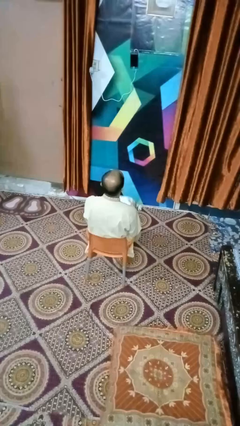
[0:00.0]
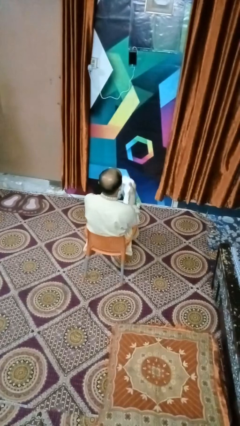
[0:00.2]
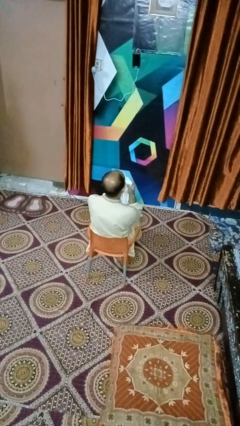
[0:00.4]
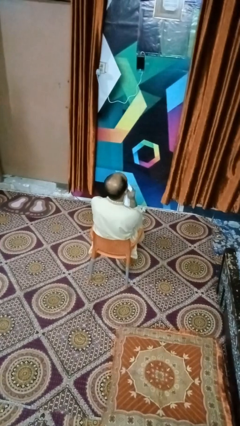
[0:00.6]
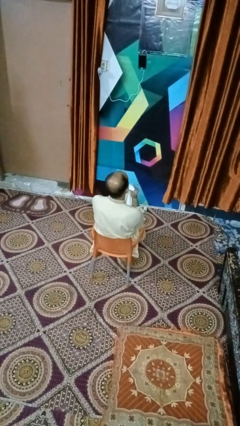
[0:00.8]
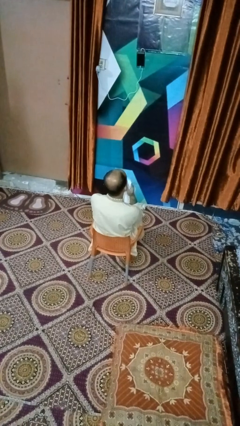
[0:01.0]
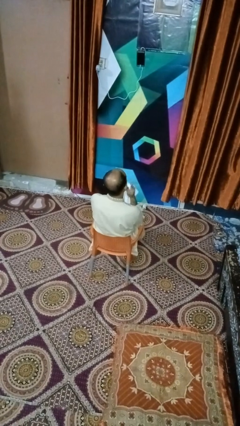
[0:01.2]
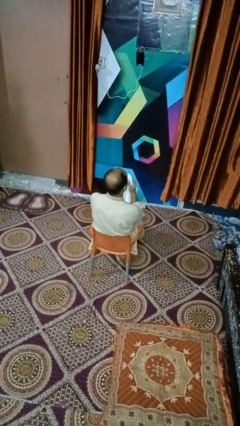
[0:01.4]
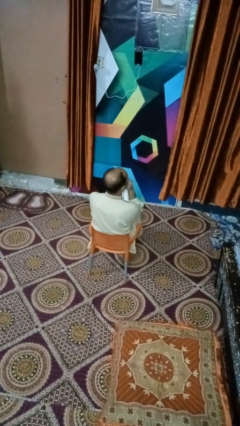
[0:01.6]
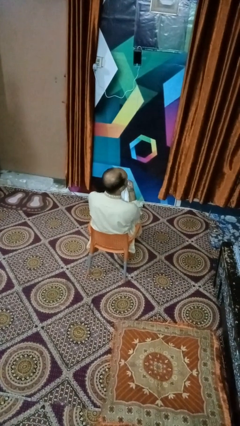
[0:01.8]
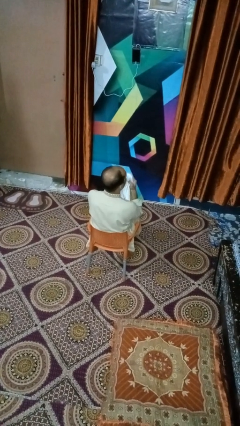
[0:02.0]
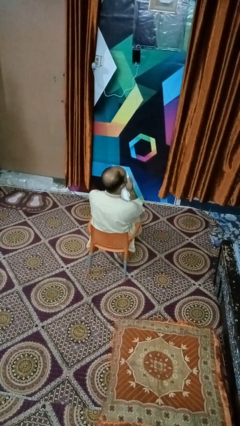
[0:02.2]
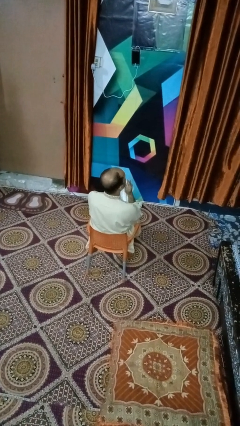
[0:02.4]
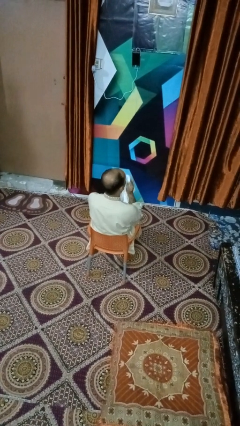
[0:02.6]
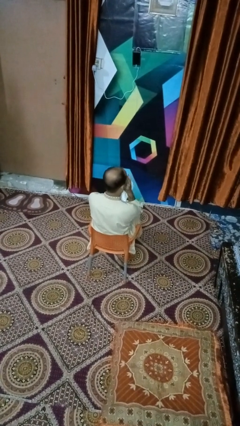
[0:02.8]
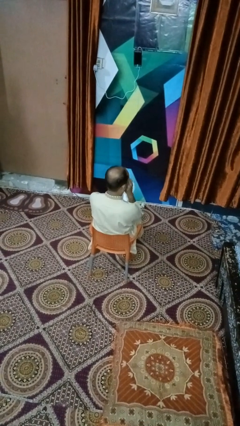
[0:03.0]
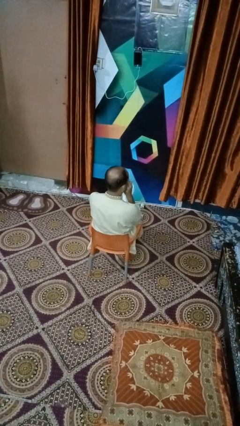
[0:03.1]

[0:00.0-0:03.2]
person wipes mouth with napkin

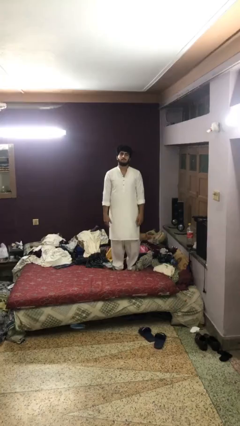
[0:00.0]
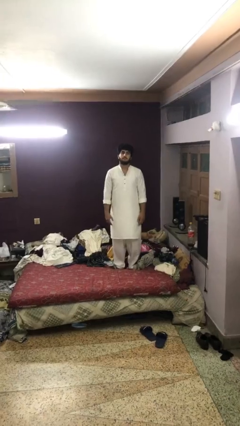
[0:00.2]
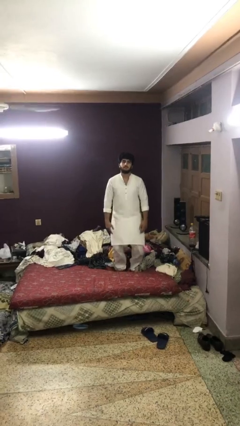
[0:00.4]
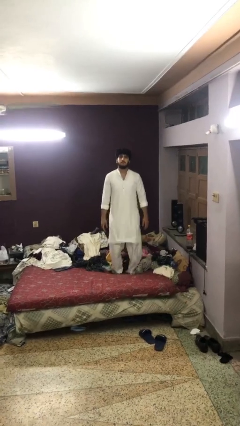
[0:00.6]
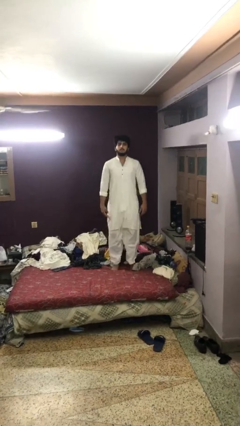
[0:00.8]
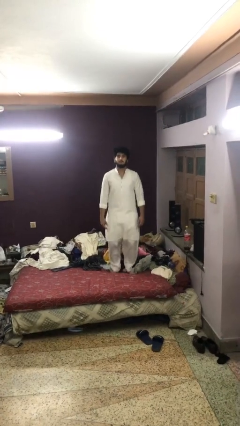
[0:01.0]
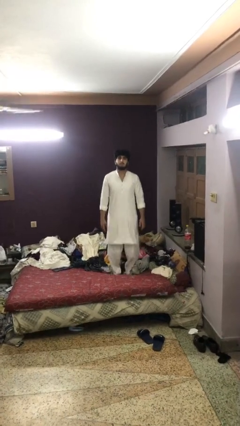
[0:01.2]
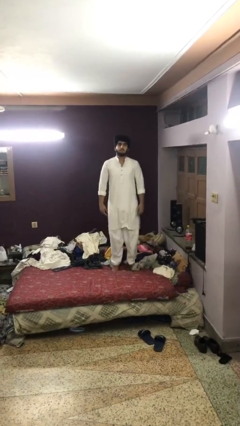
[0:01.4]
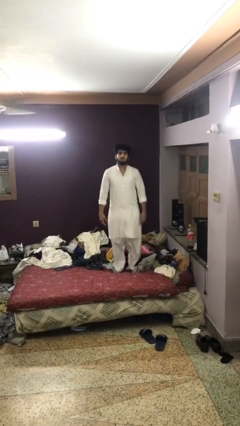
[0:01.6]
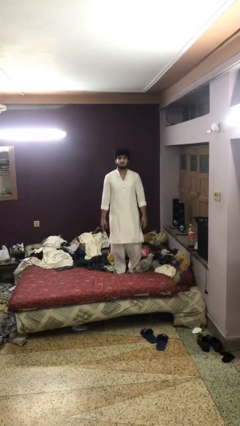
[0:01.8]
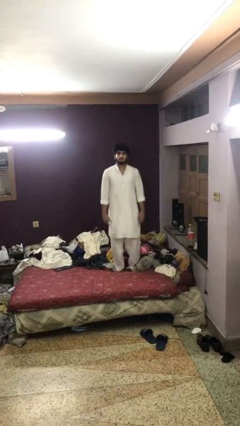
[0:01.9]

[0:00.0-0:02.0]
person jumps on bed

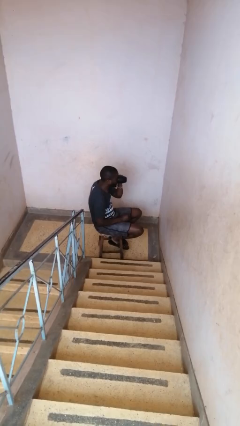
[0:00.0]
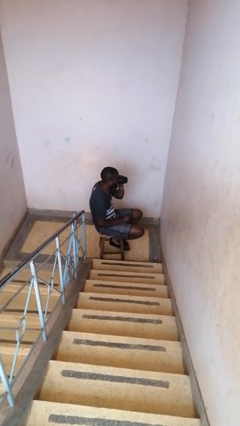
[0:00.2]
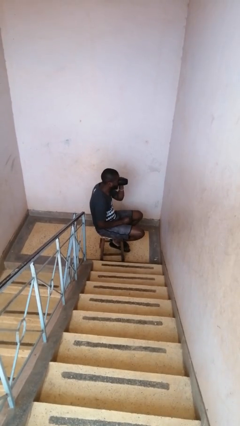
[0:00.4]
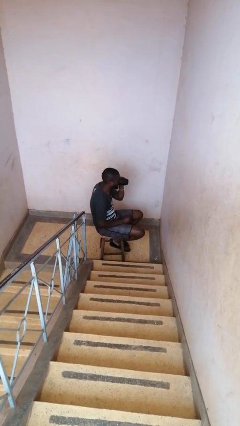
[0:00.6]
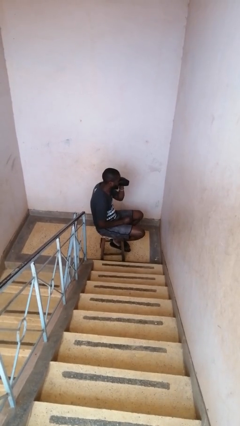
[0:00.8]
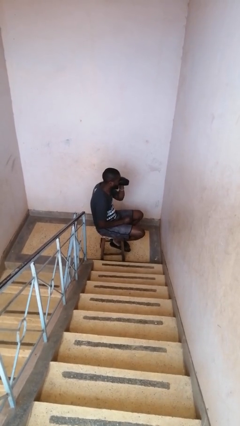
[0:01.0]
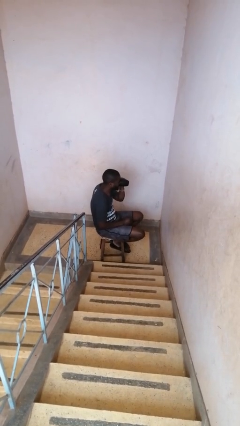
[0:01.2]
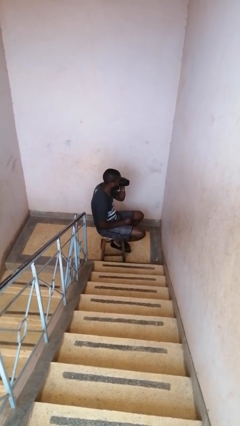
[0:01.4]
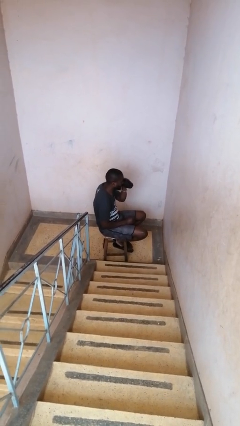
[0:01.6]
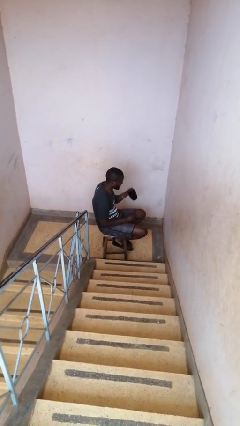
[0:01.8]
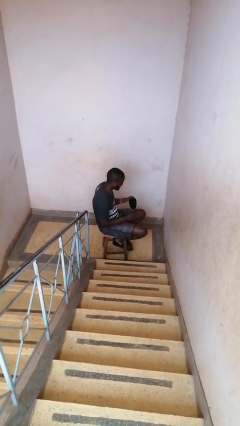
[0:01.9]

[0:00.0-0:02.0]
person drinks from mug

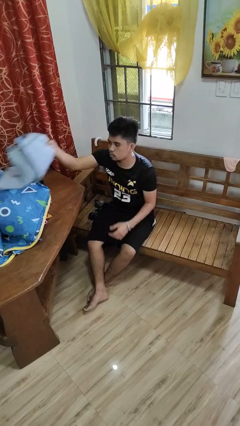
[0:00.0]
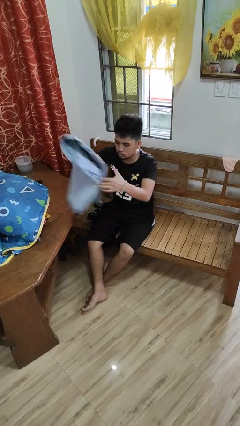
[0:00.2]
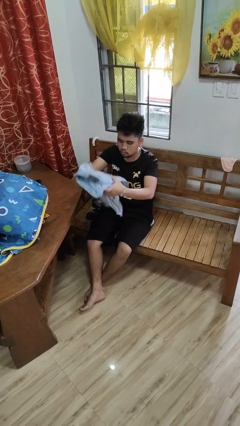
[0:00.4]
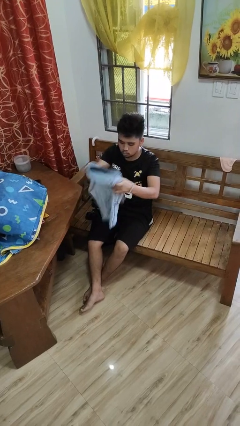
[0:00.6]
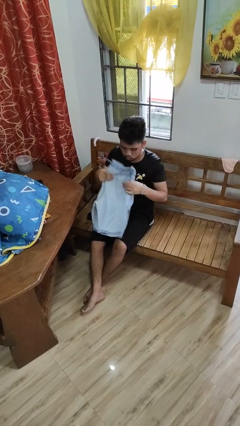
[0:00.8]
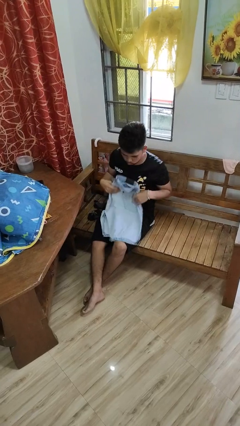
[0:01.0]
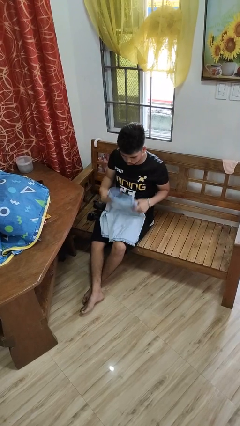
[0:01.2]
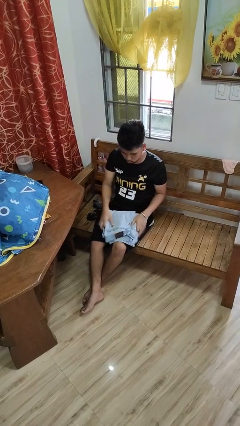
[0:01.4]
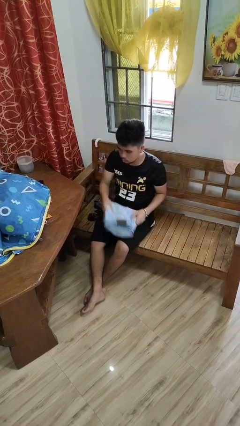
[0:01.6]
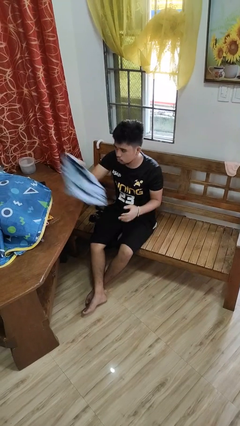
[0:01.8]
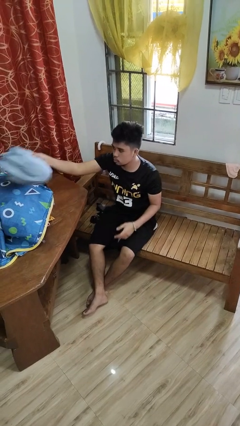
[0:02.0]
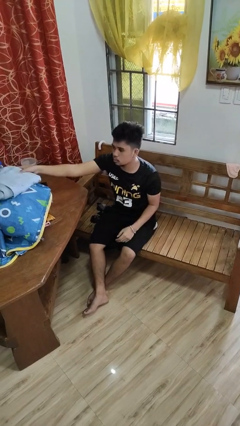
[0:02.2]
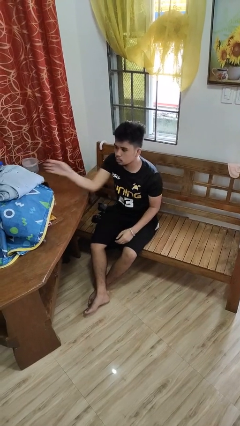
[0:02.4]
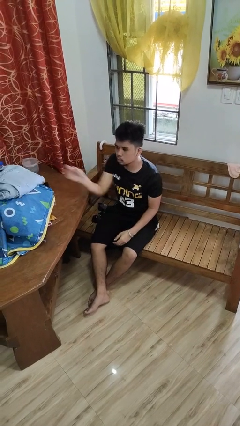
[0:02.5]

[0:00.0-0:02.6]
person folds pants

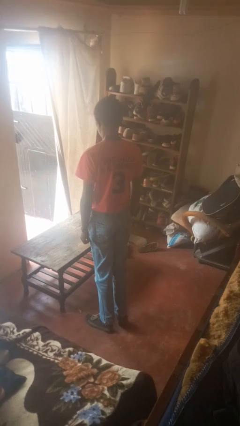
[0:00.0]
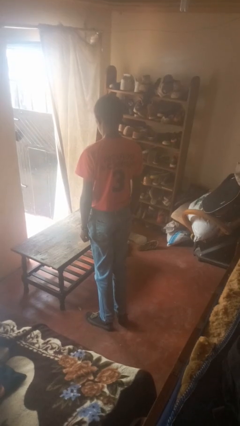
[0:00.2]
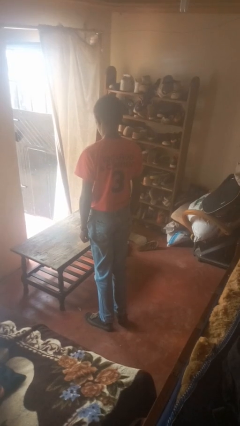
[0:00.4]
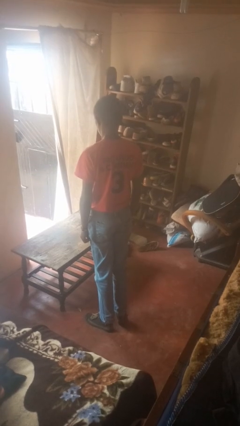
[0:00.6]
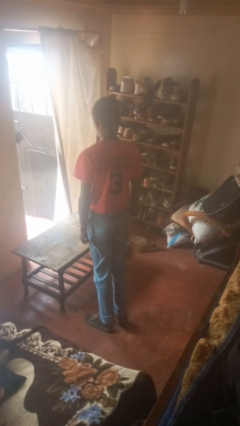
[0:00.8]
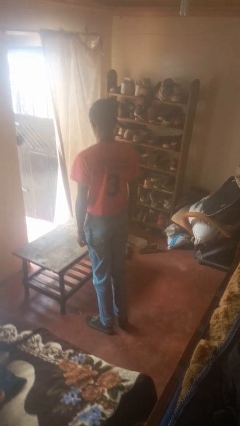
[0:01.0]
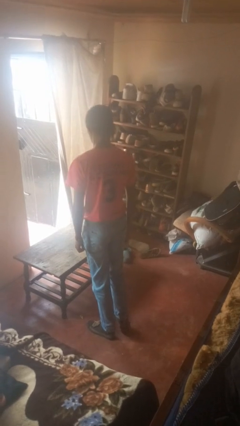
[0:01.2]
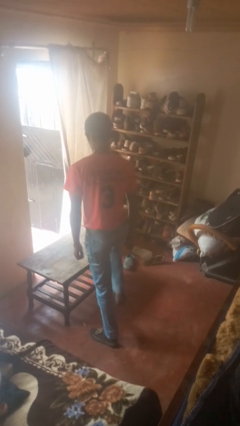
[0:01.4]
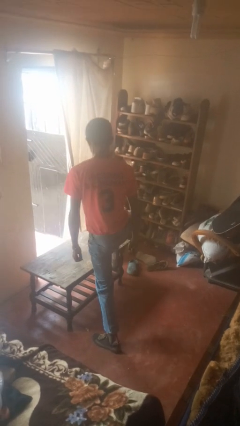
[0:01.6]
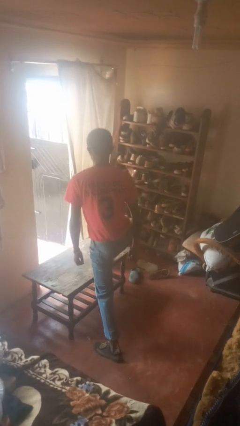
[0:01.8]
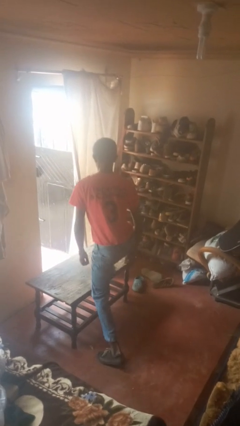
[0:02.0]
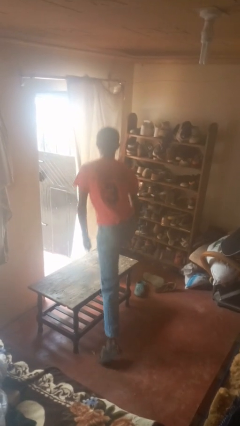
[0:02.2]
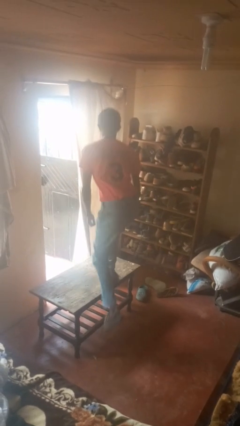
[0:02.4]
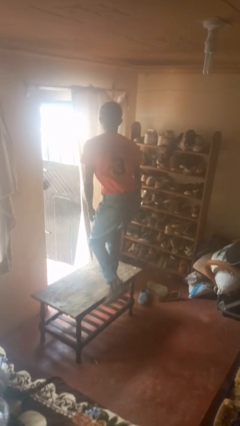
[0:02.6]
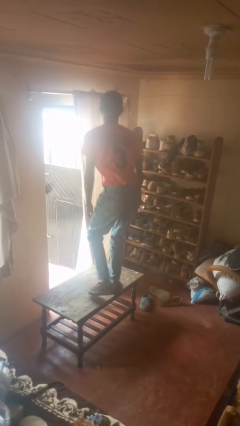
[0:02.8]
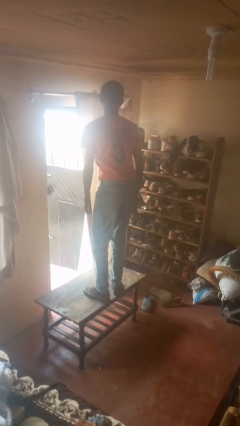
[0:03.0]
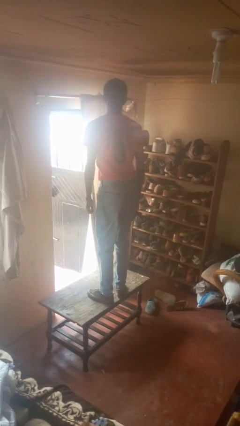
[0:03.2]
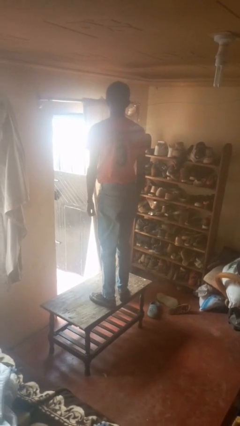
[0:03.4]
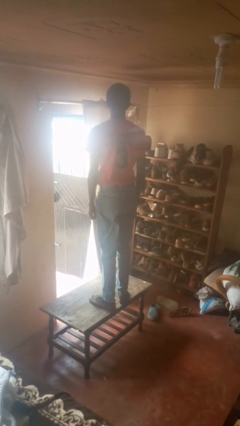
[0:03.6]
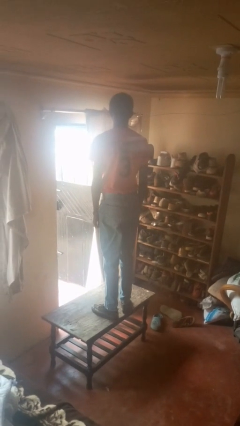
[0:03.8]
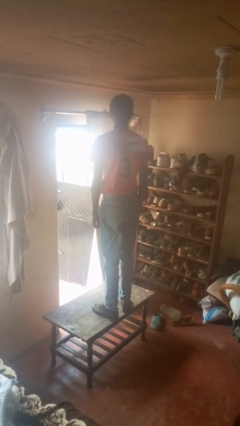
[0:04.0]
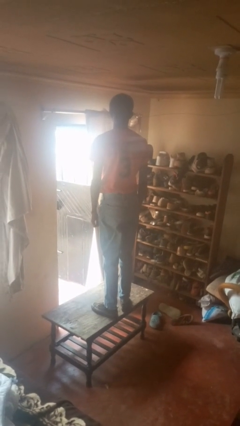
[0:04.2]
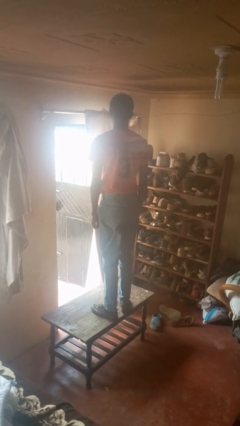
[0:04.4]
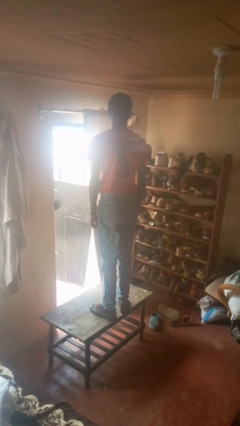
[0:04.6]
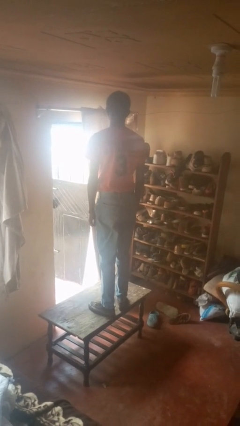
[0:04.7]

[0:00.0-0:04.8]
person climbs on table

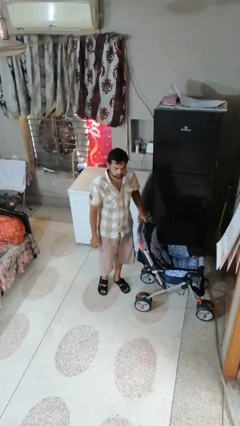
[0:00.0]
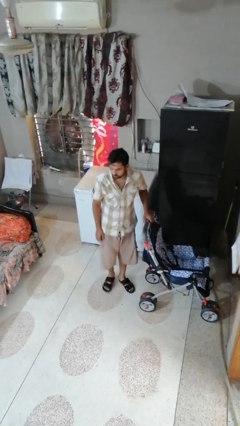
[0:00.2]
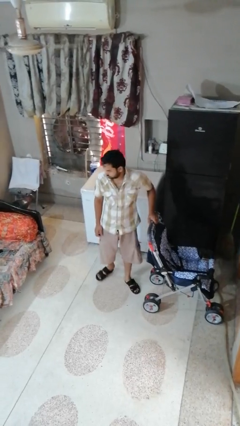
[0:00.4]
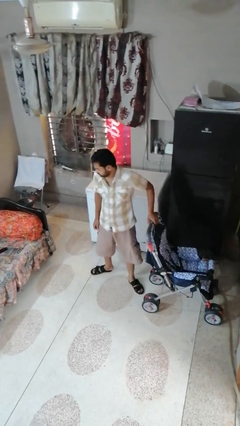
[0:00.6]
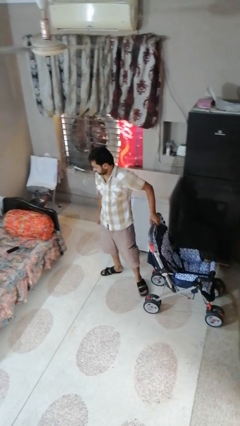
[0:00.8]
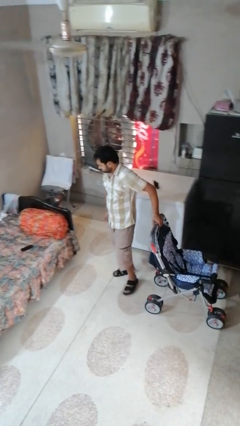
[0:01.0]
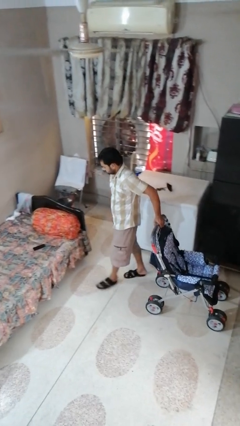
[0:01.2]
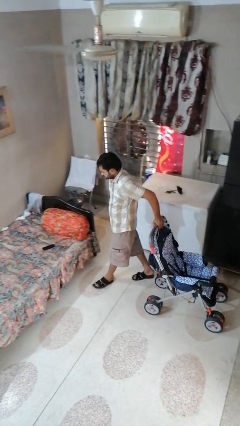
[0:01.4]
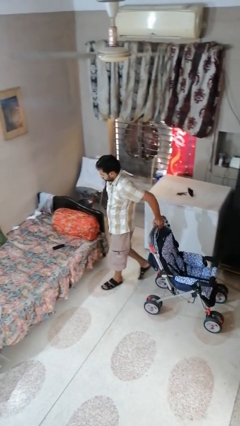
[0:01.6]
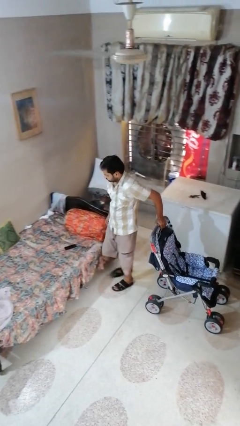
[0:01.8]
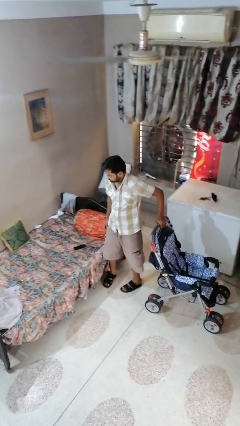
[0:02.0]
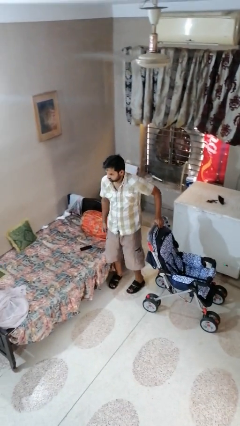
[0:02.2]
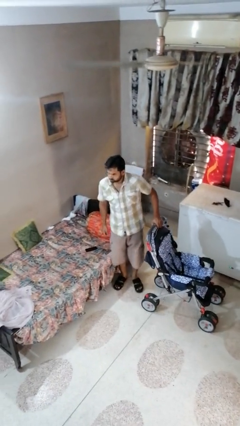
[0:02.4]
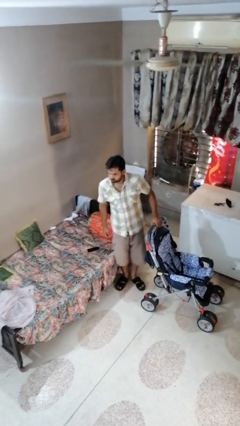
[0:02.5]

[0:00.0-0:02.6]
person pulls wheeled cart
